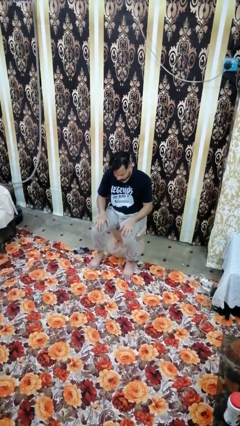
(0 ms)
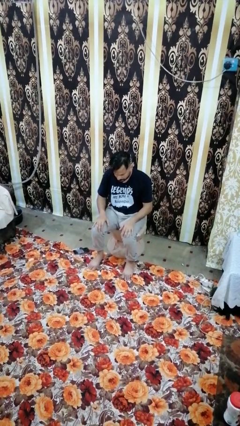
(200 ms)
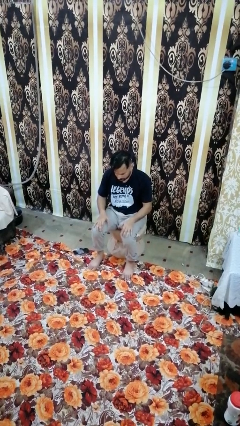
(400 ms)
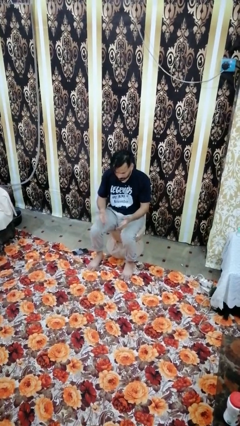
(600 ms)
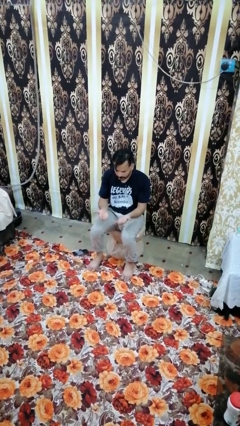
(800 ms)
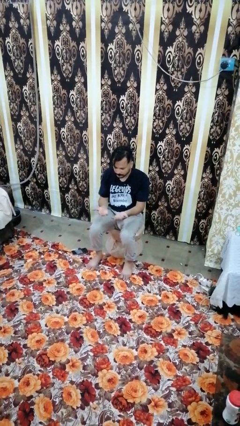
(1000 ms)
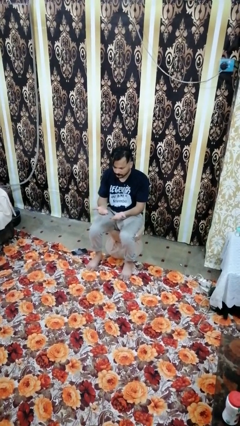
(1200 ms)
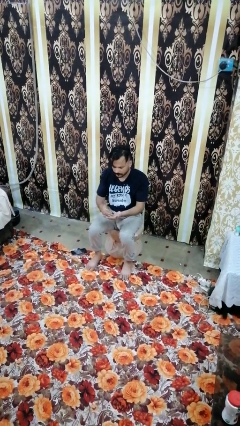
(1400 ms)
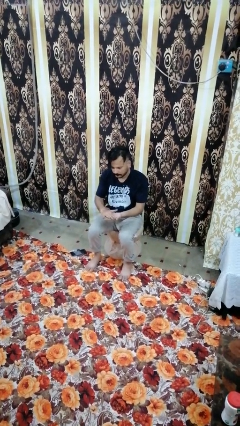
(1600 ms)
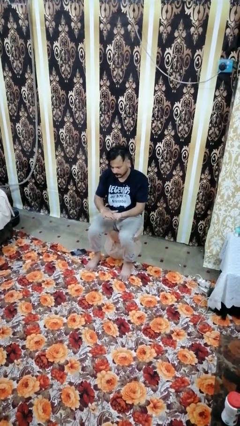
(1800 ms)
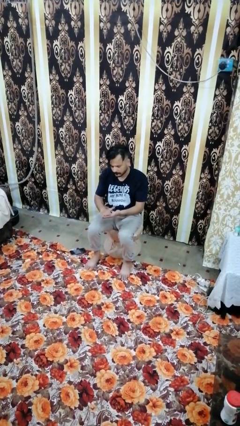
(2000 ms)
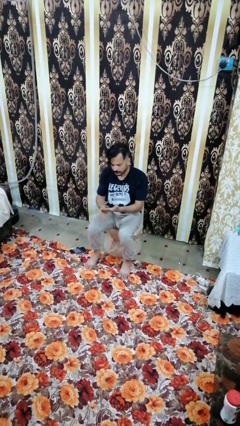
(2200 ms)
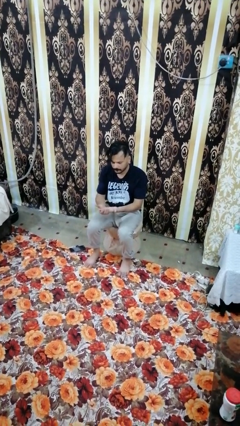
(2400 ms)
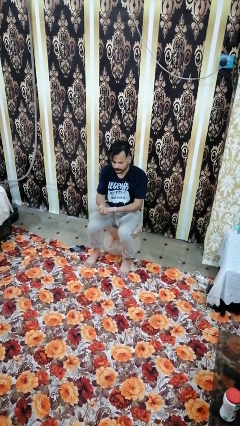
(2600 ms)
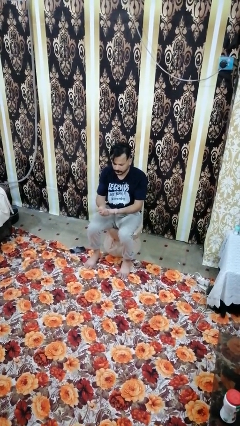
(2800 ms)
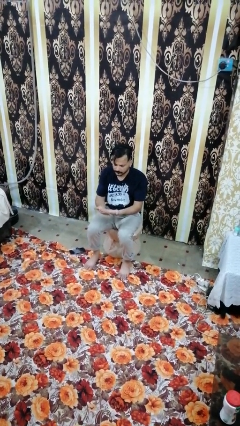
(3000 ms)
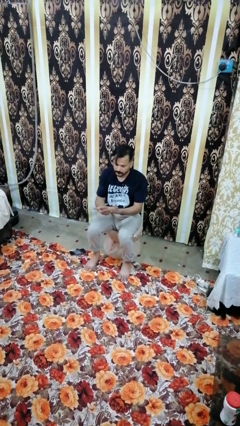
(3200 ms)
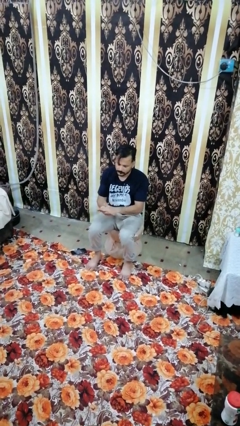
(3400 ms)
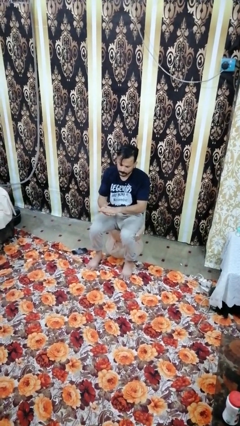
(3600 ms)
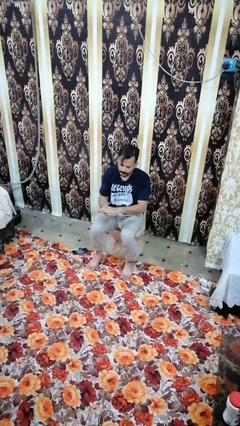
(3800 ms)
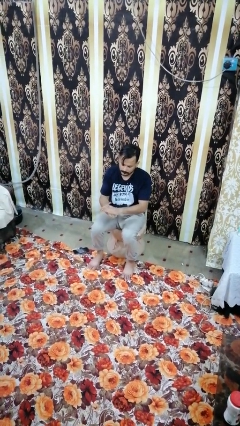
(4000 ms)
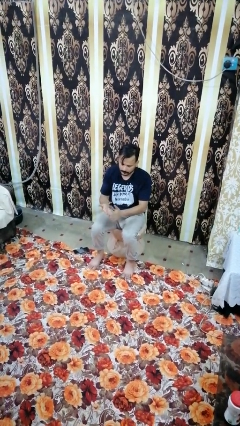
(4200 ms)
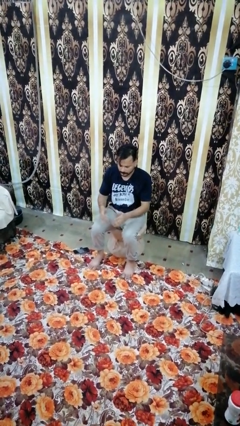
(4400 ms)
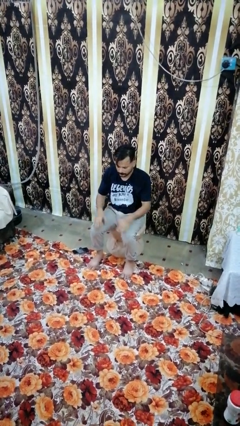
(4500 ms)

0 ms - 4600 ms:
person looks at hands in lap

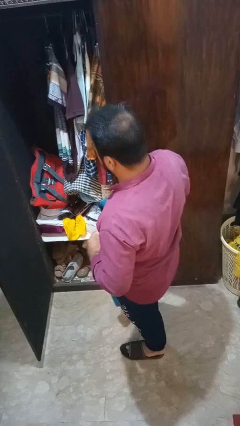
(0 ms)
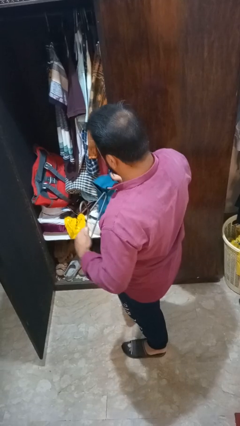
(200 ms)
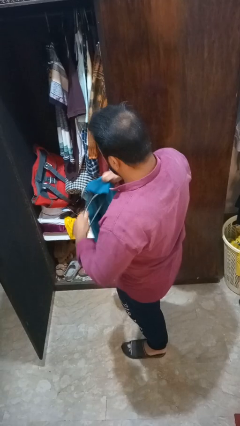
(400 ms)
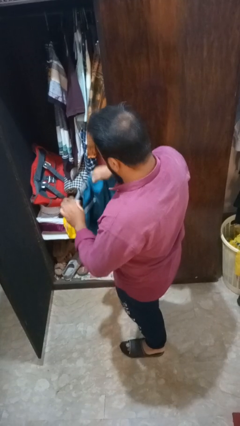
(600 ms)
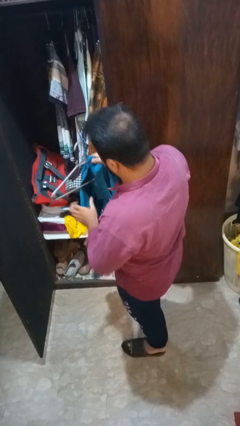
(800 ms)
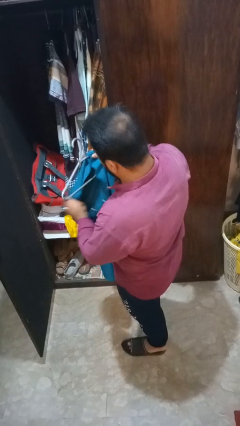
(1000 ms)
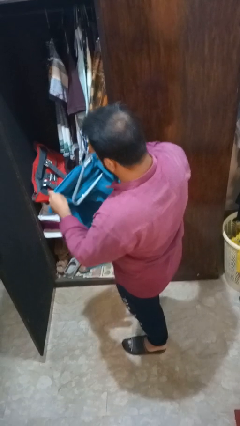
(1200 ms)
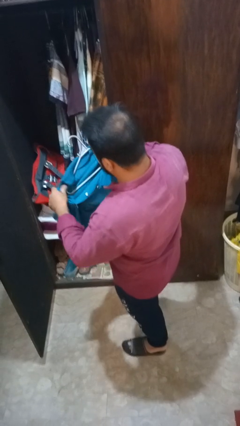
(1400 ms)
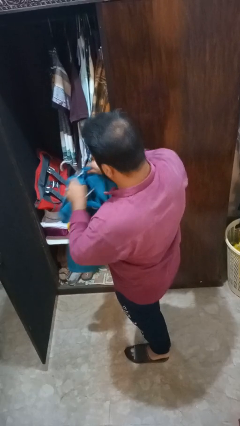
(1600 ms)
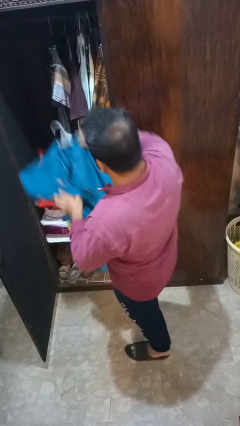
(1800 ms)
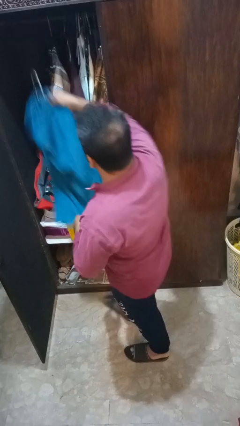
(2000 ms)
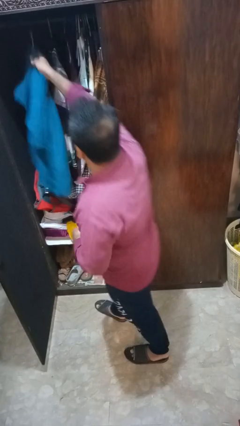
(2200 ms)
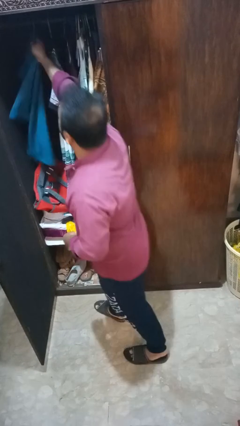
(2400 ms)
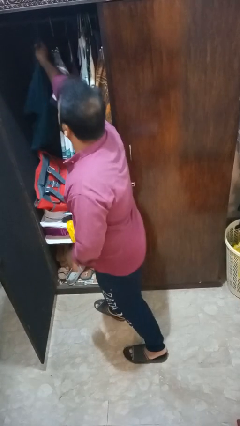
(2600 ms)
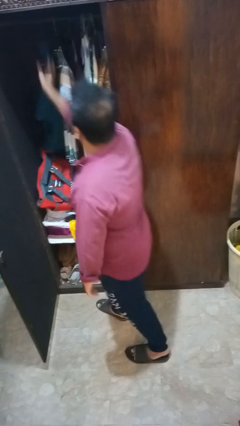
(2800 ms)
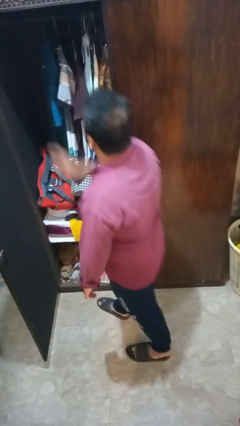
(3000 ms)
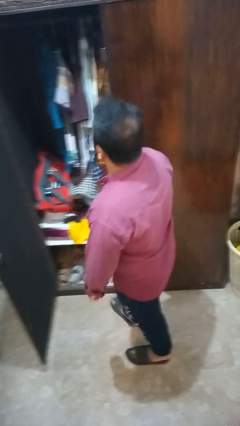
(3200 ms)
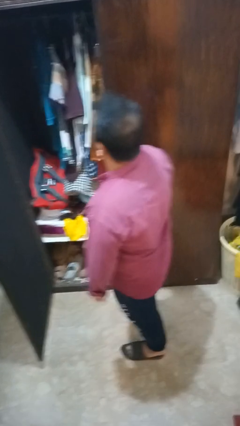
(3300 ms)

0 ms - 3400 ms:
person puts clothes into closet

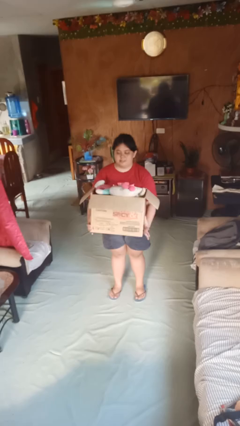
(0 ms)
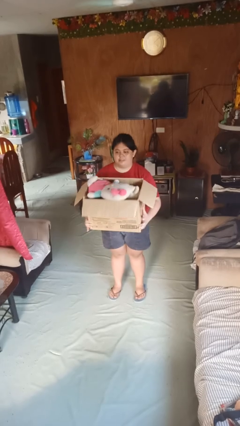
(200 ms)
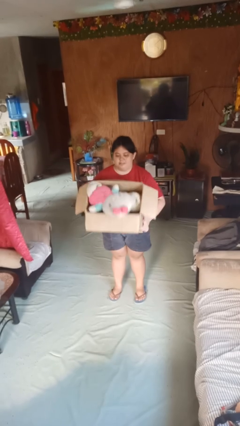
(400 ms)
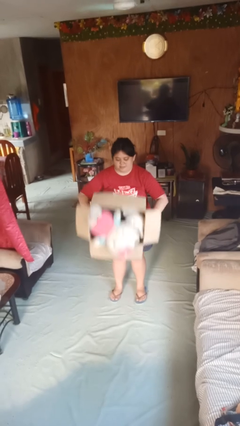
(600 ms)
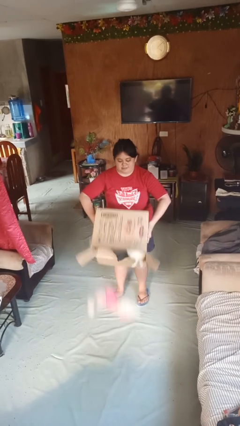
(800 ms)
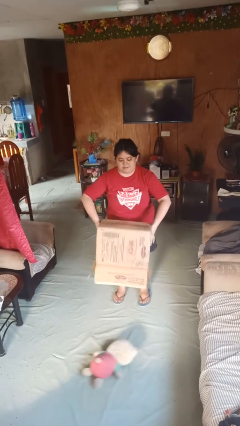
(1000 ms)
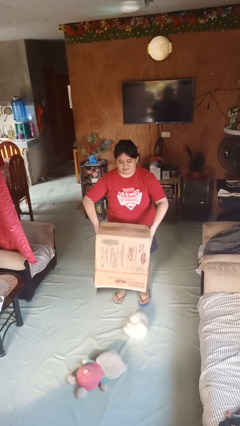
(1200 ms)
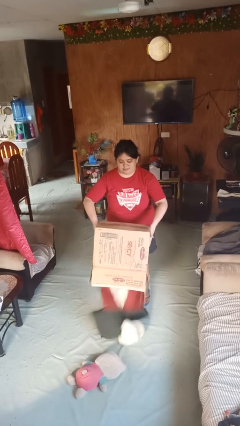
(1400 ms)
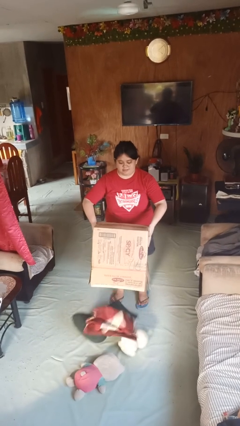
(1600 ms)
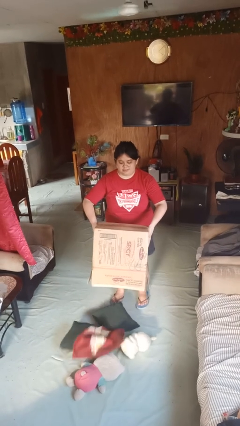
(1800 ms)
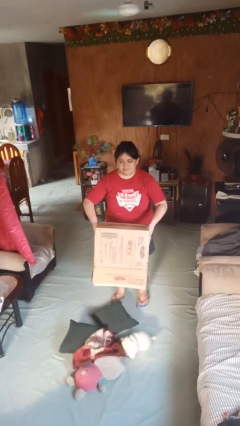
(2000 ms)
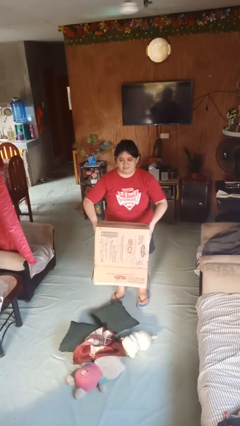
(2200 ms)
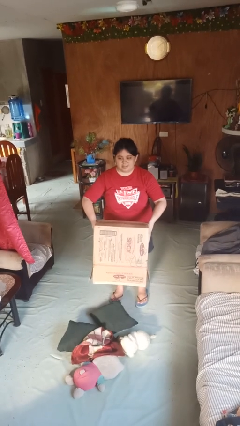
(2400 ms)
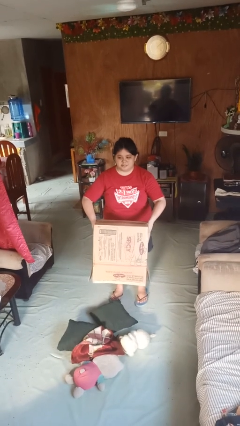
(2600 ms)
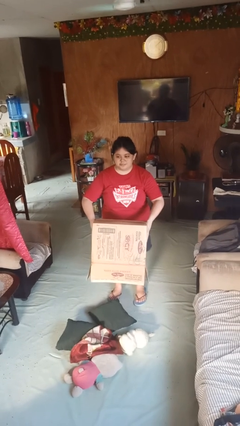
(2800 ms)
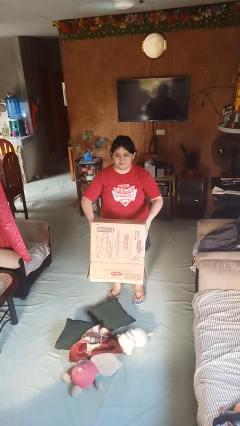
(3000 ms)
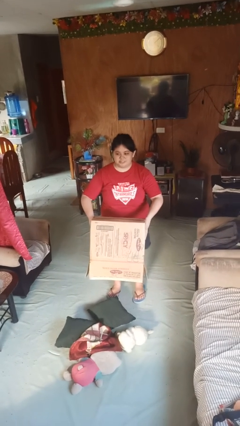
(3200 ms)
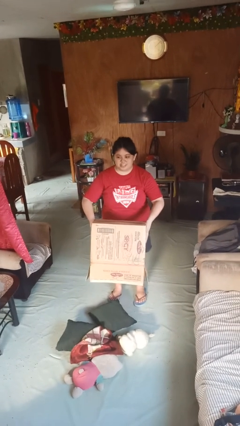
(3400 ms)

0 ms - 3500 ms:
person unloads box onto floor

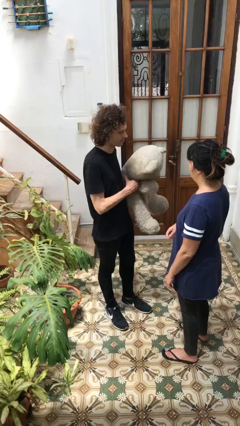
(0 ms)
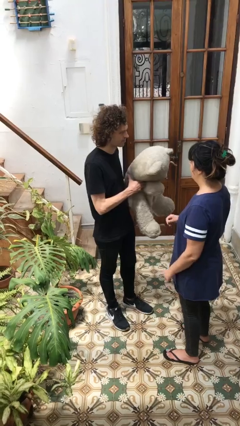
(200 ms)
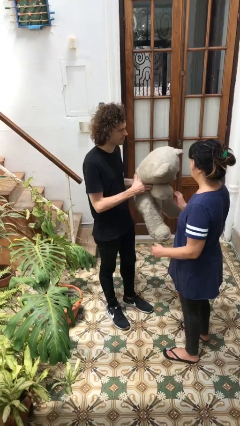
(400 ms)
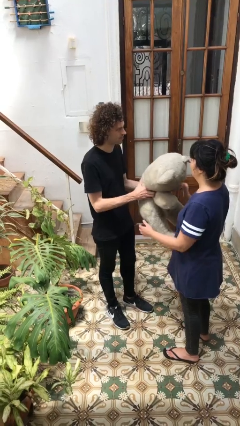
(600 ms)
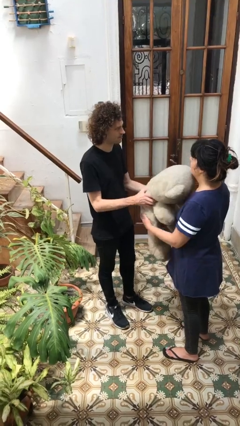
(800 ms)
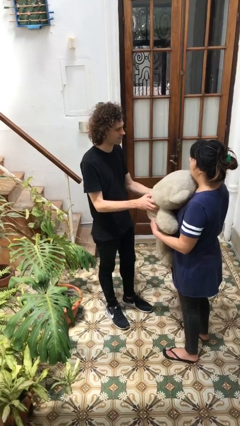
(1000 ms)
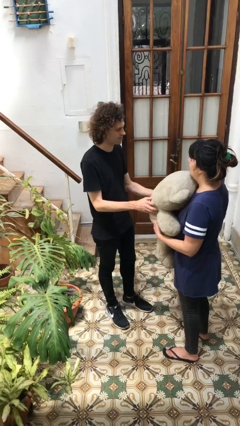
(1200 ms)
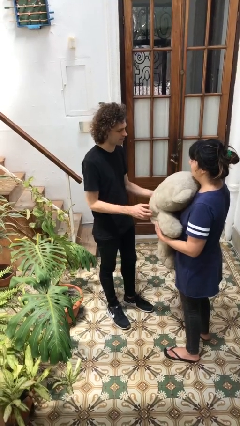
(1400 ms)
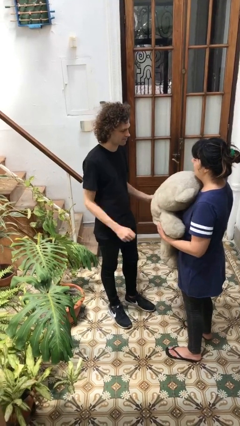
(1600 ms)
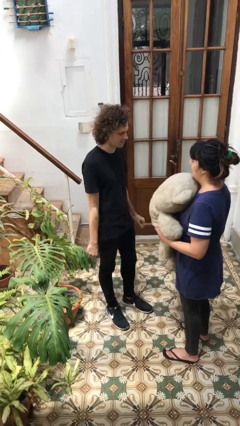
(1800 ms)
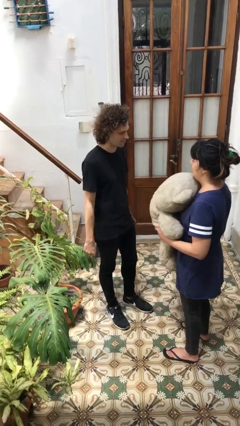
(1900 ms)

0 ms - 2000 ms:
person transfers object to person

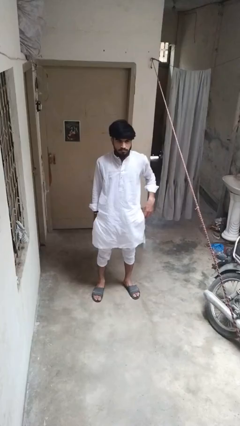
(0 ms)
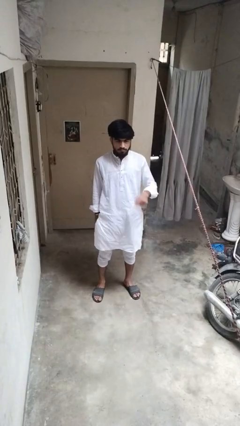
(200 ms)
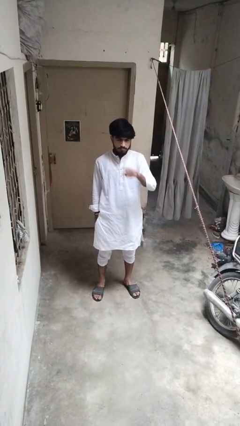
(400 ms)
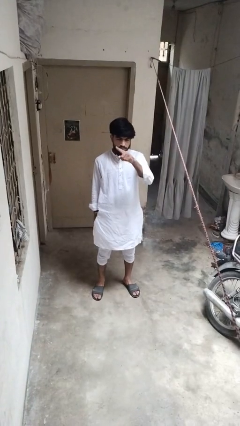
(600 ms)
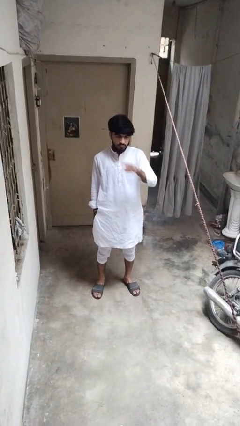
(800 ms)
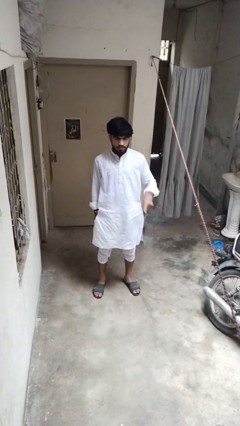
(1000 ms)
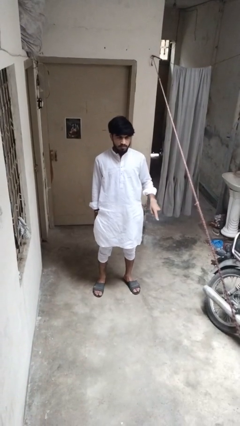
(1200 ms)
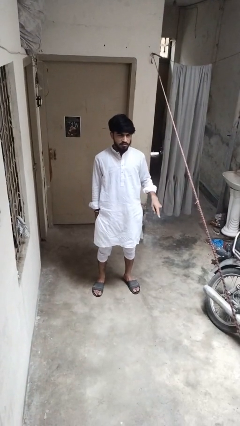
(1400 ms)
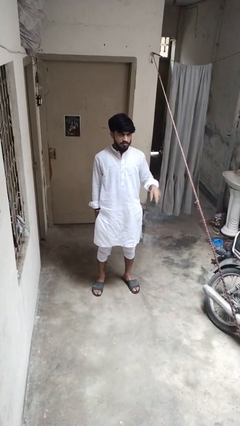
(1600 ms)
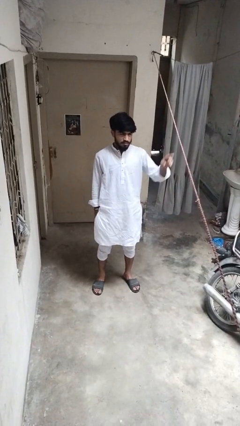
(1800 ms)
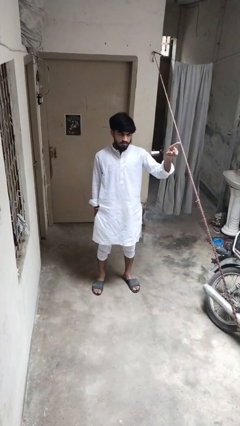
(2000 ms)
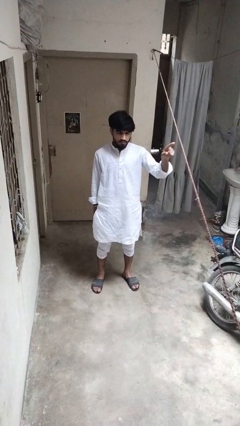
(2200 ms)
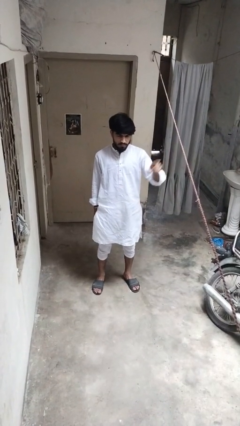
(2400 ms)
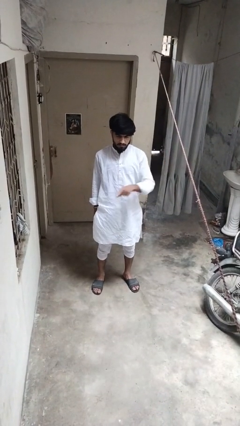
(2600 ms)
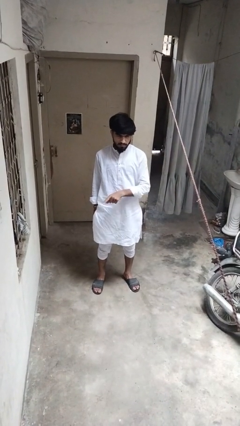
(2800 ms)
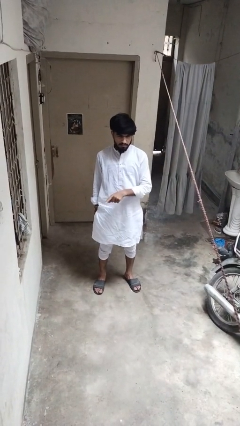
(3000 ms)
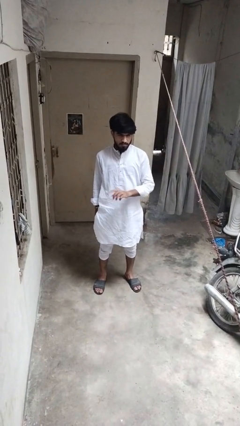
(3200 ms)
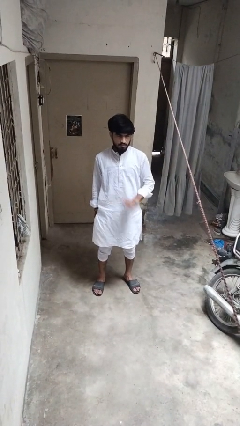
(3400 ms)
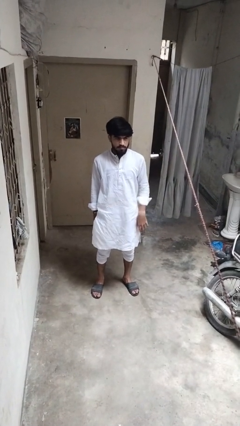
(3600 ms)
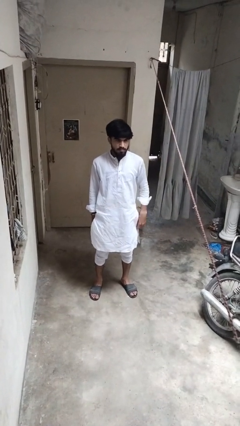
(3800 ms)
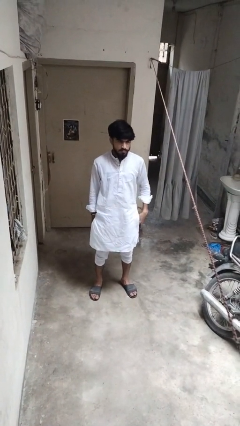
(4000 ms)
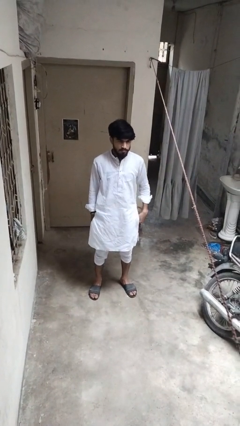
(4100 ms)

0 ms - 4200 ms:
person gestures cut

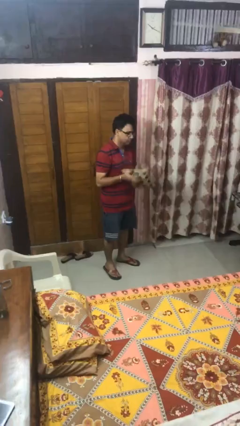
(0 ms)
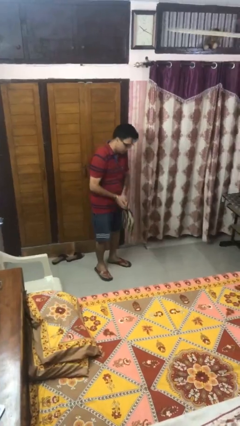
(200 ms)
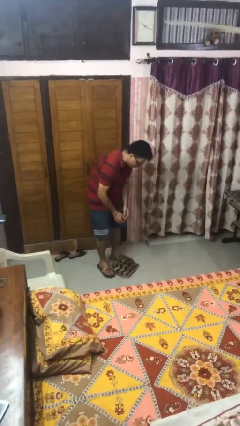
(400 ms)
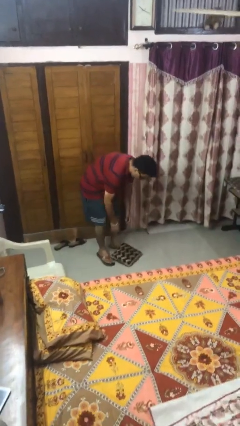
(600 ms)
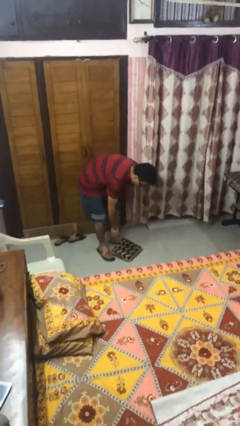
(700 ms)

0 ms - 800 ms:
person drops object
